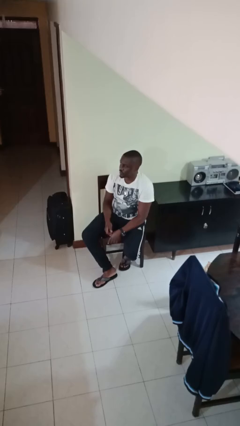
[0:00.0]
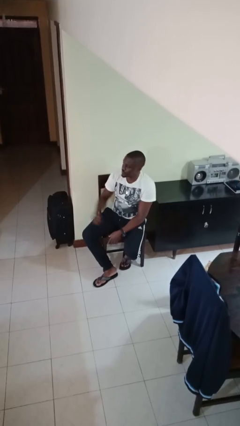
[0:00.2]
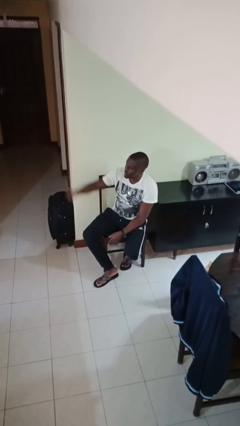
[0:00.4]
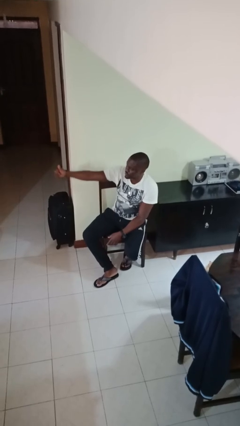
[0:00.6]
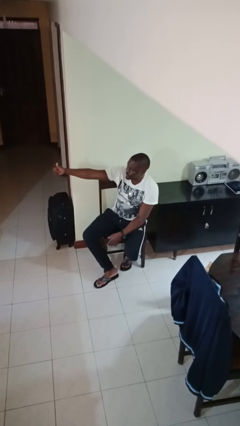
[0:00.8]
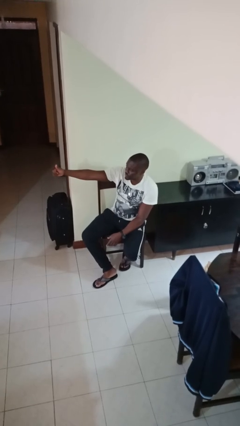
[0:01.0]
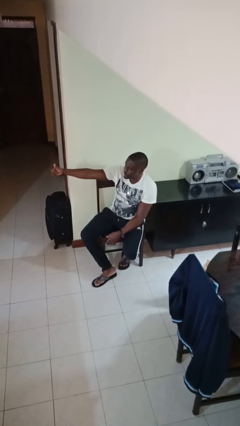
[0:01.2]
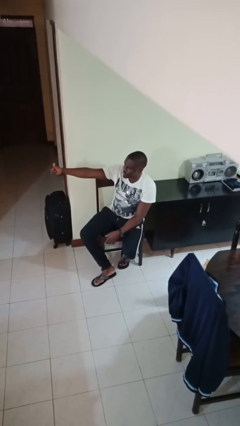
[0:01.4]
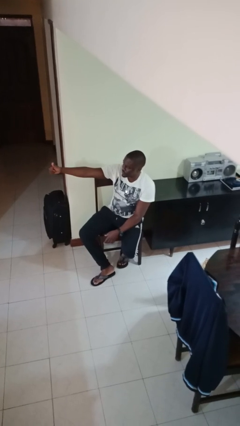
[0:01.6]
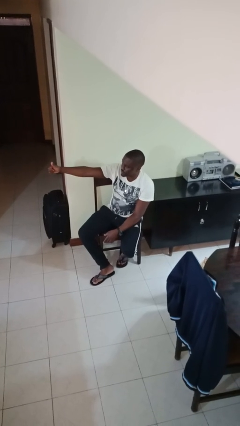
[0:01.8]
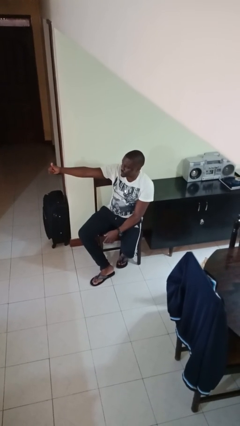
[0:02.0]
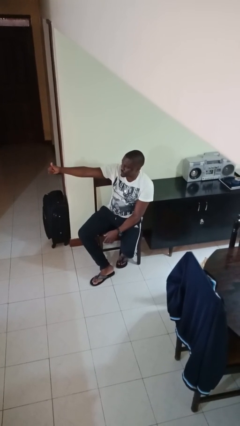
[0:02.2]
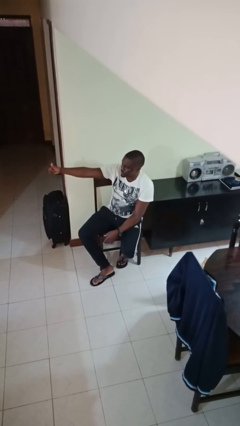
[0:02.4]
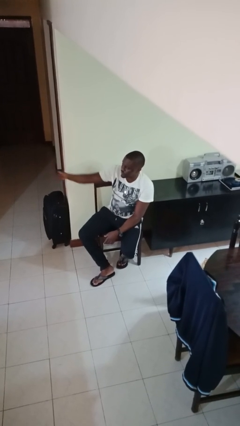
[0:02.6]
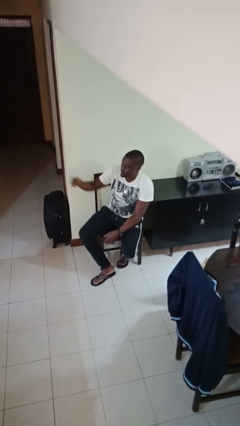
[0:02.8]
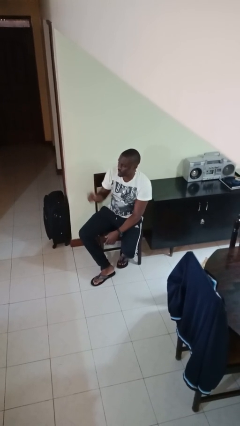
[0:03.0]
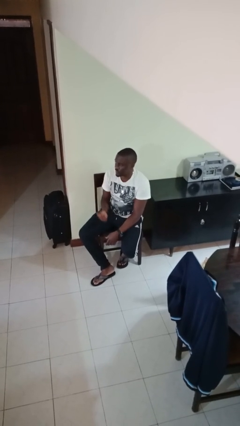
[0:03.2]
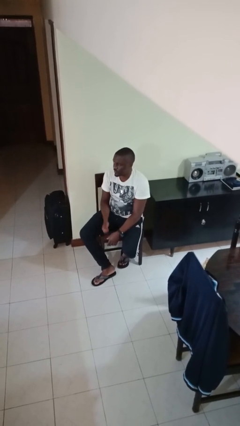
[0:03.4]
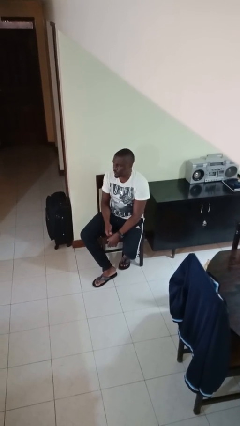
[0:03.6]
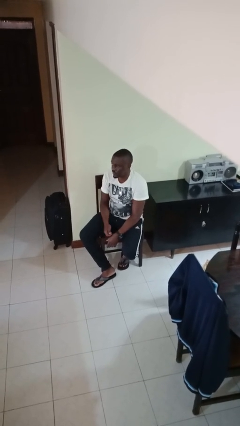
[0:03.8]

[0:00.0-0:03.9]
person gestures thumbs up

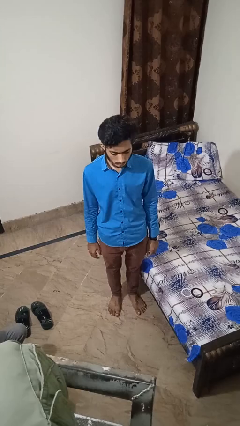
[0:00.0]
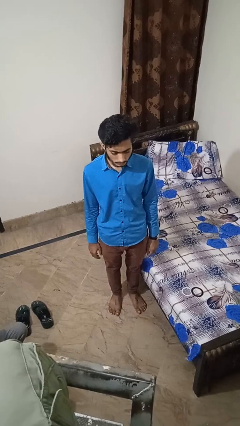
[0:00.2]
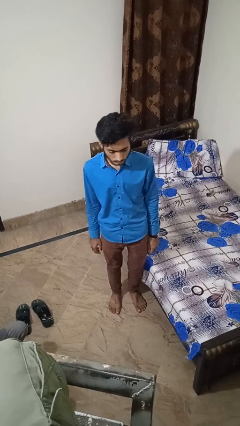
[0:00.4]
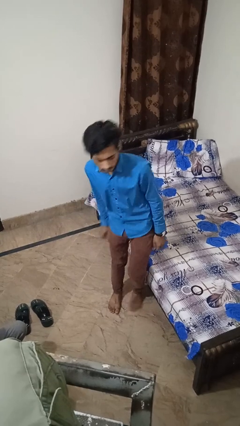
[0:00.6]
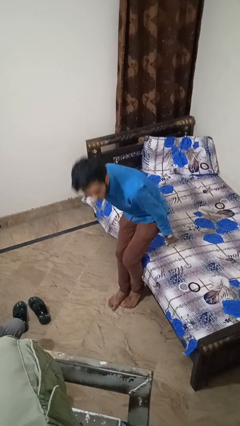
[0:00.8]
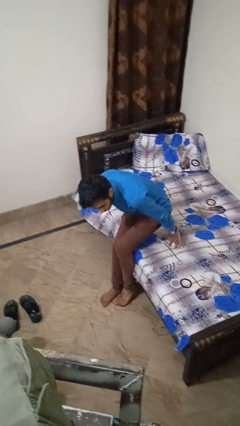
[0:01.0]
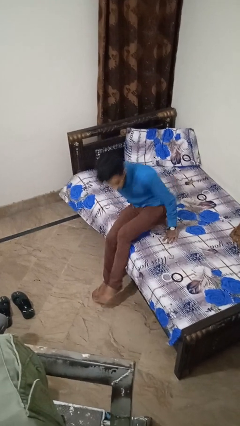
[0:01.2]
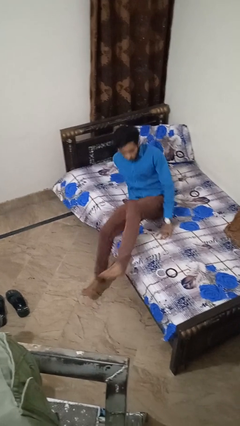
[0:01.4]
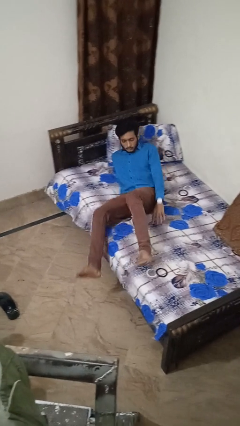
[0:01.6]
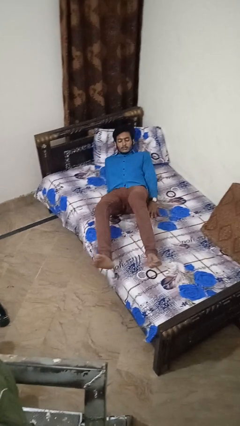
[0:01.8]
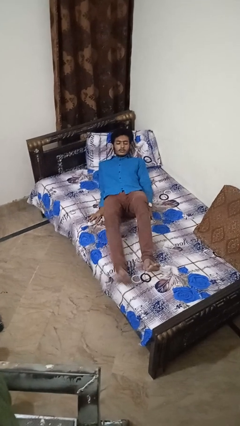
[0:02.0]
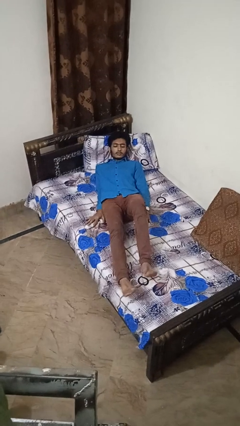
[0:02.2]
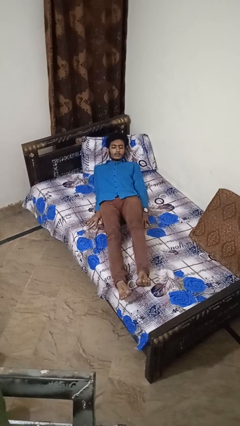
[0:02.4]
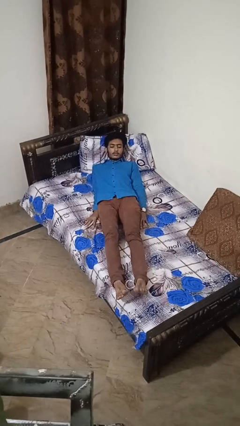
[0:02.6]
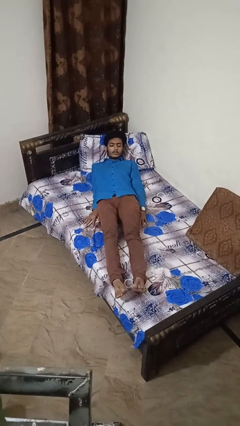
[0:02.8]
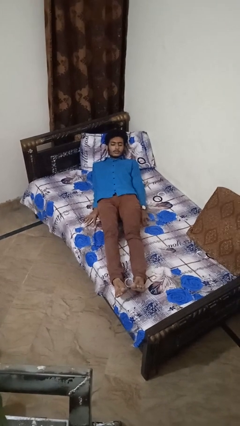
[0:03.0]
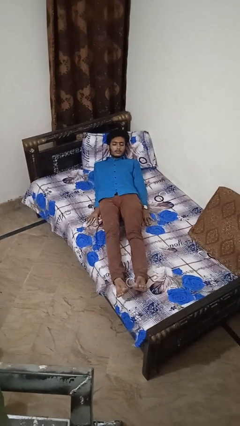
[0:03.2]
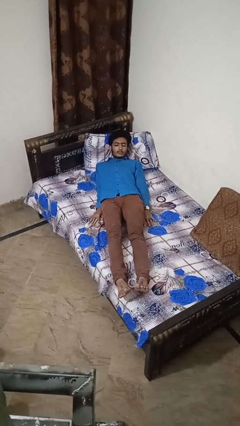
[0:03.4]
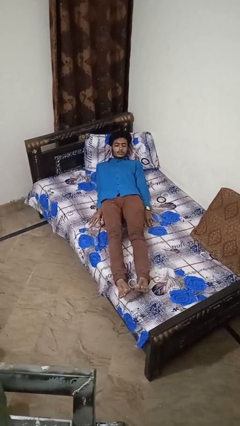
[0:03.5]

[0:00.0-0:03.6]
person lies down on bed

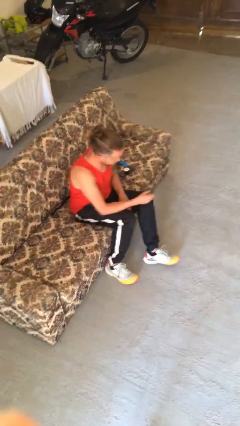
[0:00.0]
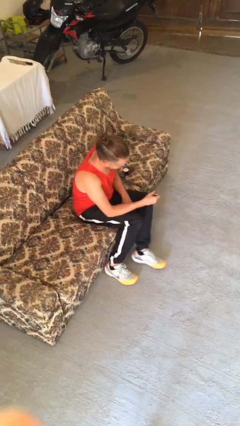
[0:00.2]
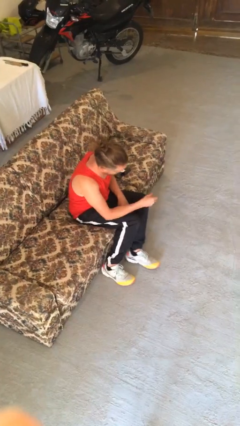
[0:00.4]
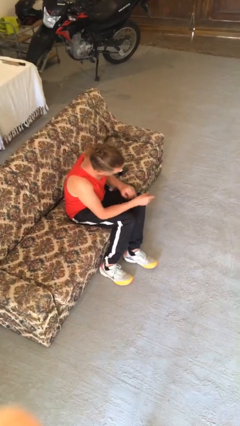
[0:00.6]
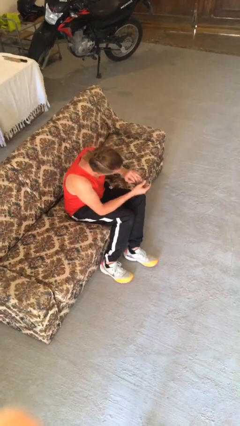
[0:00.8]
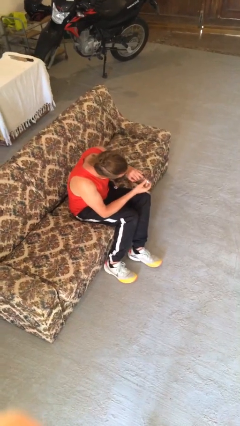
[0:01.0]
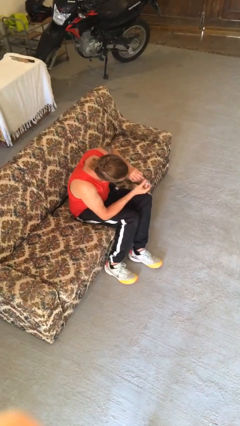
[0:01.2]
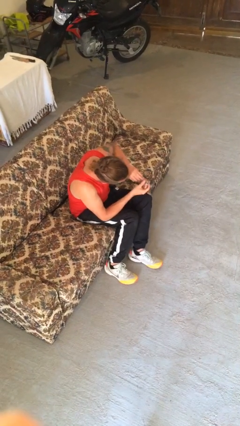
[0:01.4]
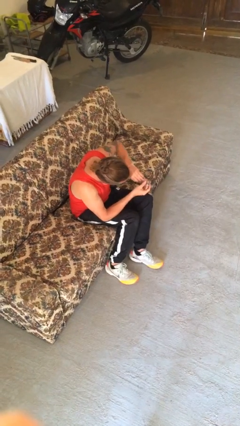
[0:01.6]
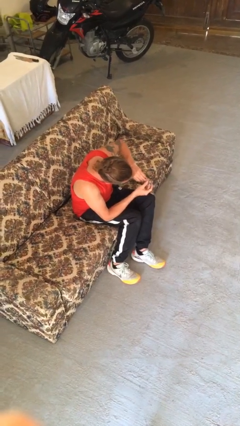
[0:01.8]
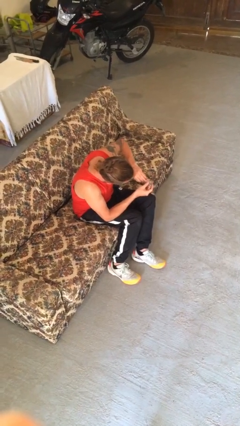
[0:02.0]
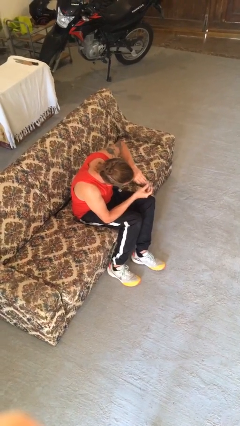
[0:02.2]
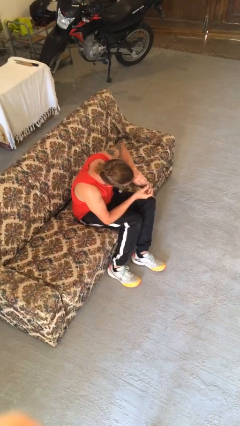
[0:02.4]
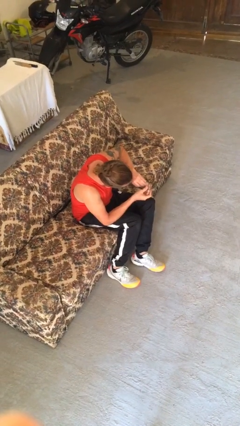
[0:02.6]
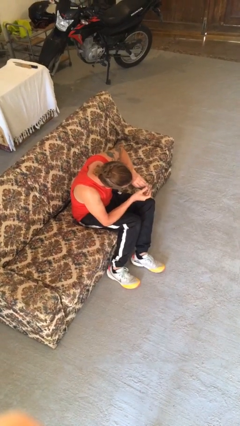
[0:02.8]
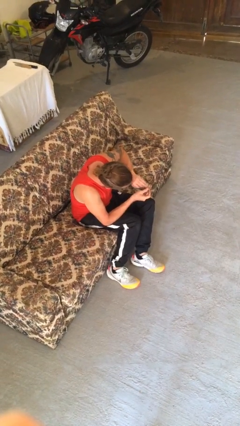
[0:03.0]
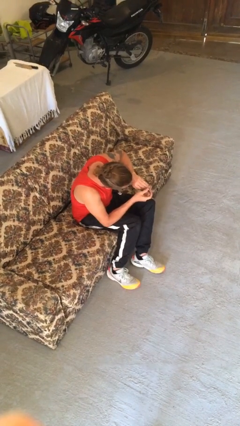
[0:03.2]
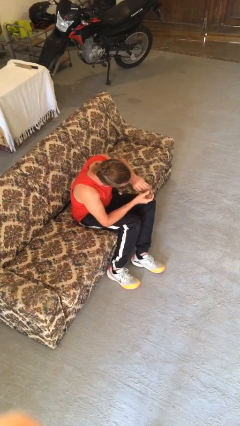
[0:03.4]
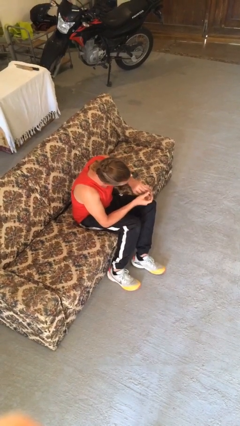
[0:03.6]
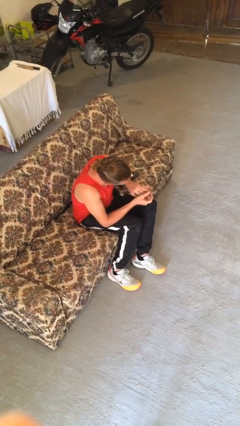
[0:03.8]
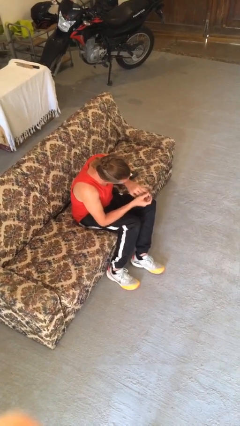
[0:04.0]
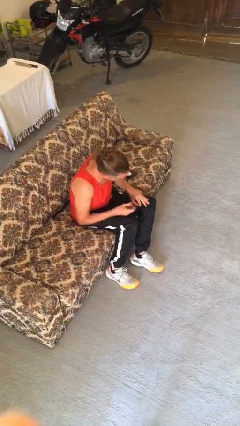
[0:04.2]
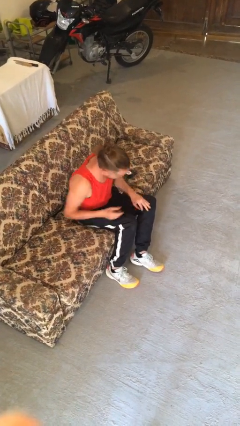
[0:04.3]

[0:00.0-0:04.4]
person clips fingernails

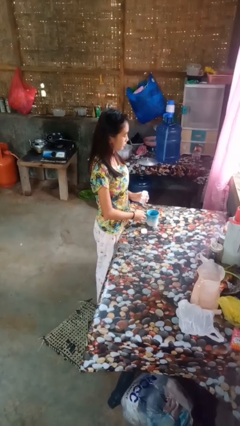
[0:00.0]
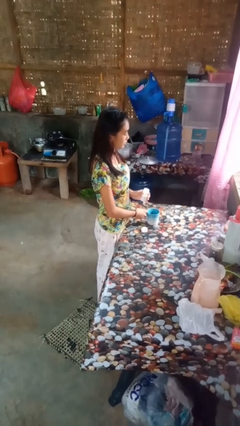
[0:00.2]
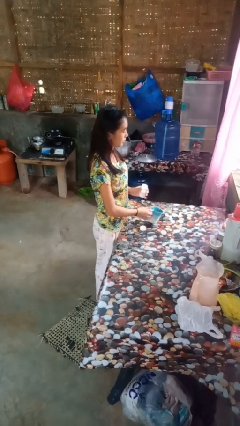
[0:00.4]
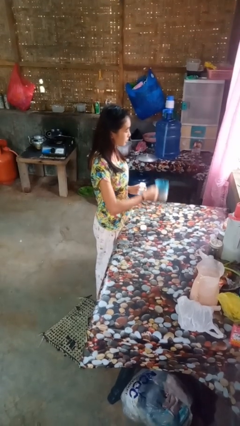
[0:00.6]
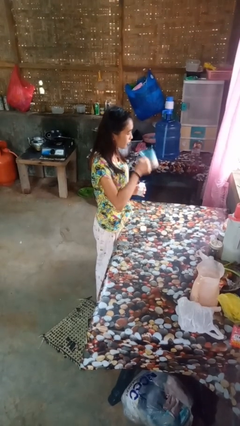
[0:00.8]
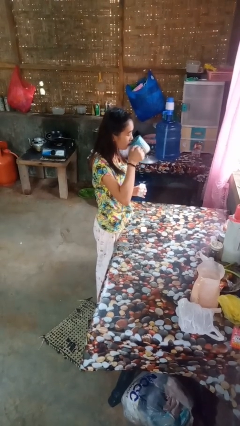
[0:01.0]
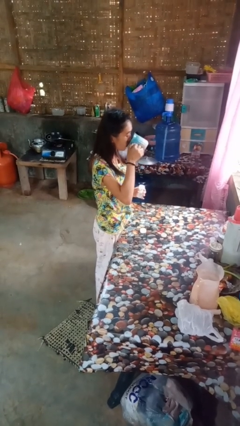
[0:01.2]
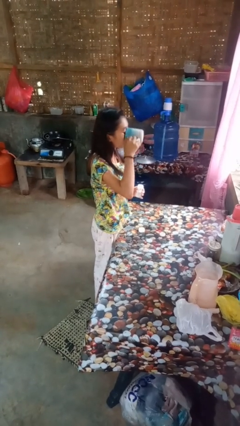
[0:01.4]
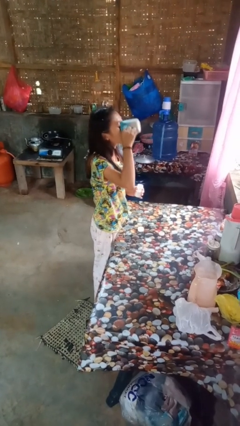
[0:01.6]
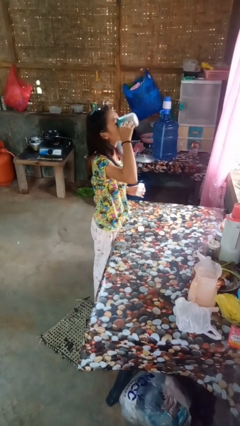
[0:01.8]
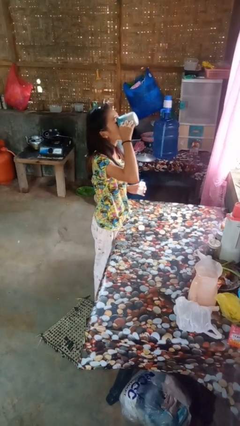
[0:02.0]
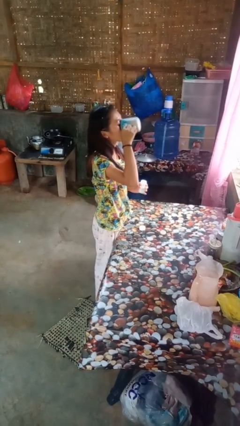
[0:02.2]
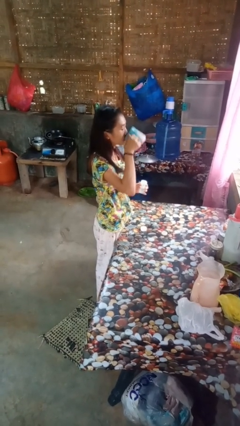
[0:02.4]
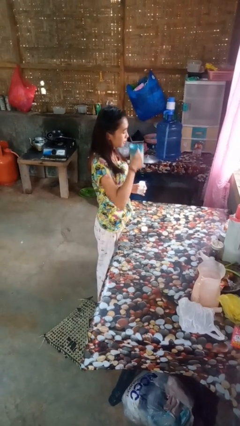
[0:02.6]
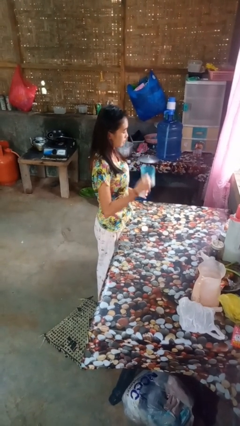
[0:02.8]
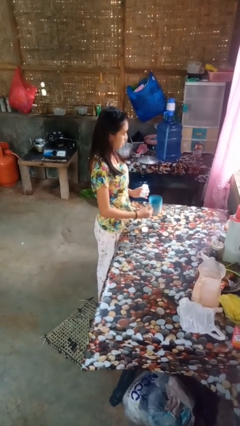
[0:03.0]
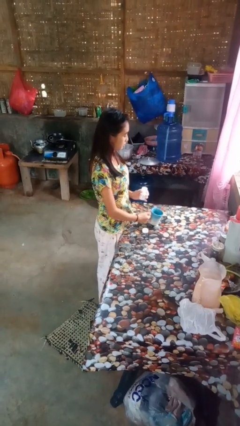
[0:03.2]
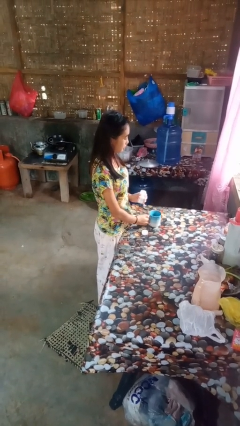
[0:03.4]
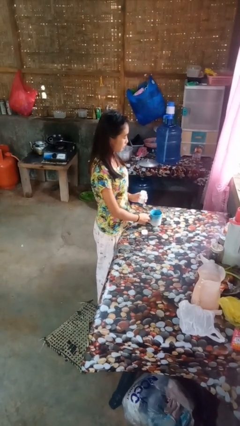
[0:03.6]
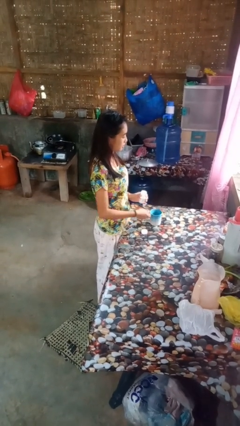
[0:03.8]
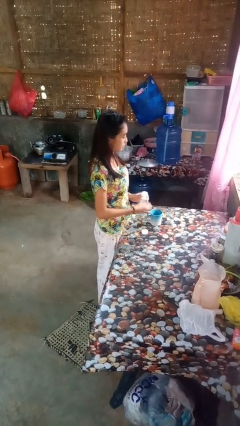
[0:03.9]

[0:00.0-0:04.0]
person drinks from cup

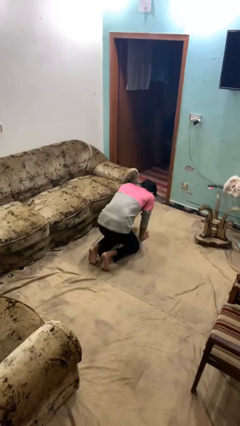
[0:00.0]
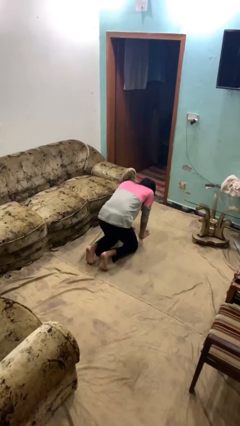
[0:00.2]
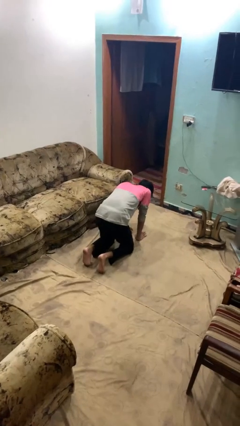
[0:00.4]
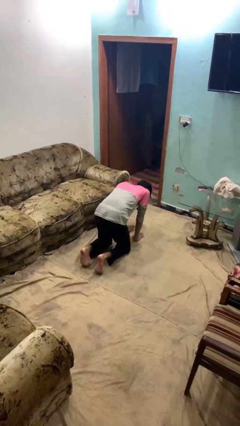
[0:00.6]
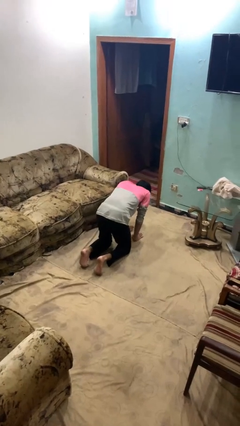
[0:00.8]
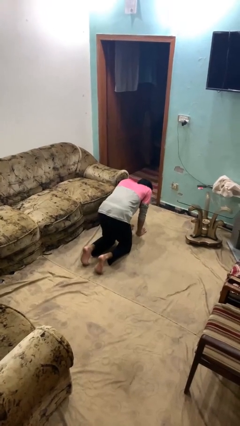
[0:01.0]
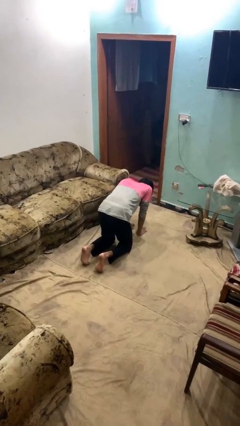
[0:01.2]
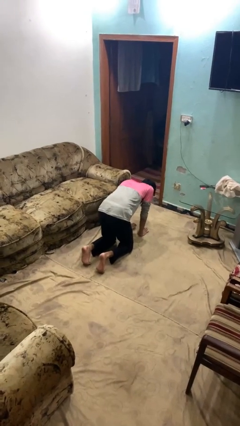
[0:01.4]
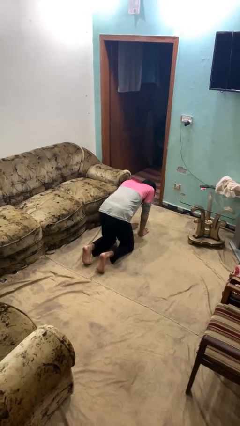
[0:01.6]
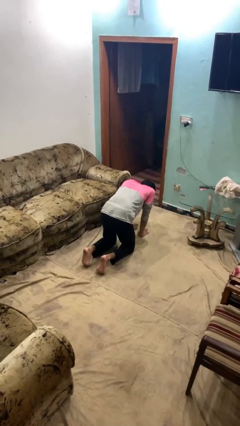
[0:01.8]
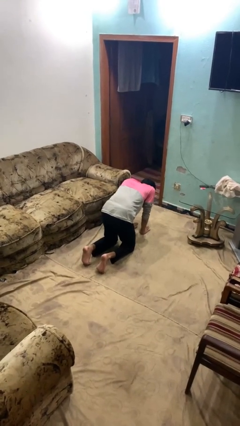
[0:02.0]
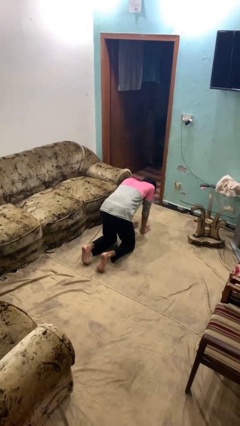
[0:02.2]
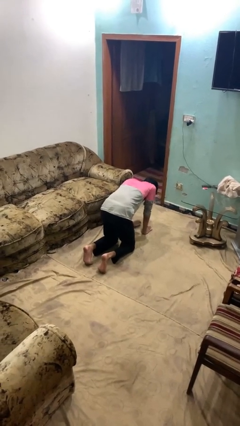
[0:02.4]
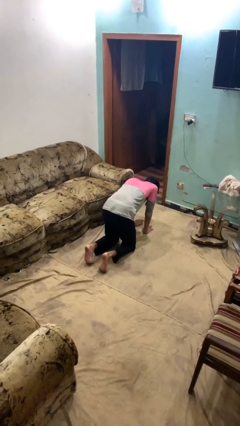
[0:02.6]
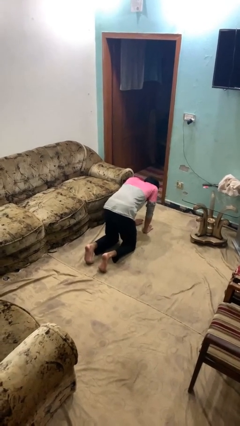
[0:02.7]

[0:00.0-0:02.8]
person crawls
